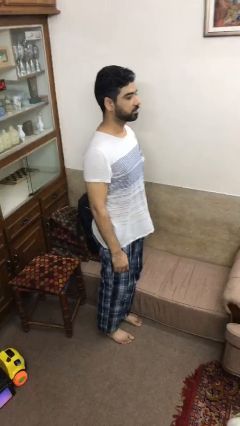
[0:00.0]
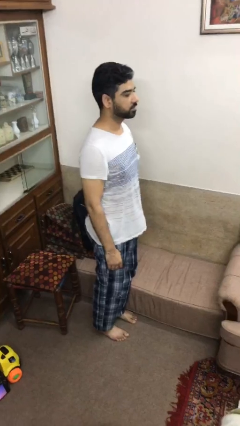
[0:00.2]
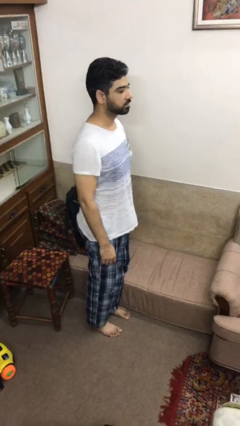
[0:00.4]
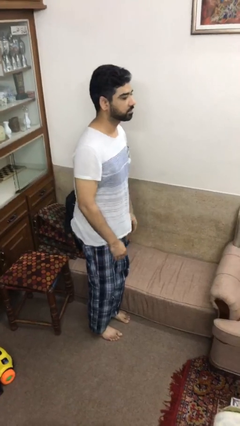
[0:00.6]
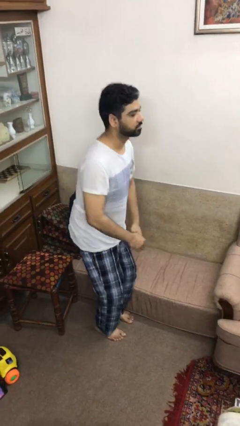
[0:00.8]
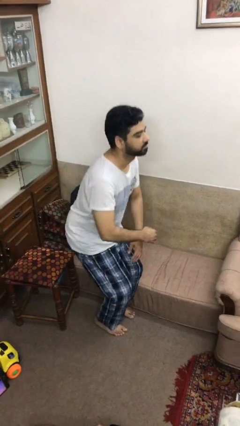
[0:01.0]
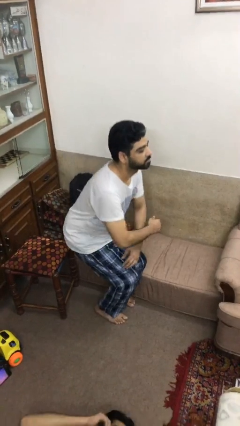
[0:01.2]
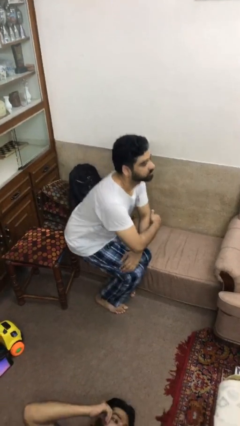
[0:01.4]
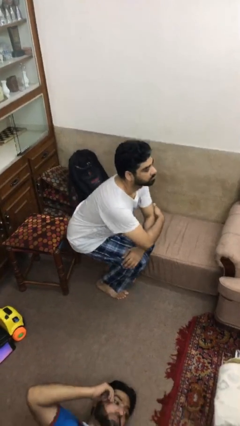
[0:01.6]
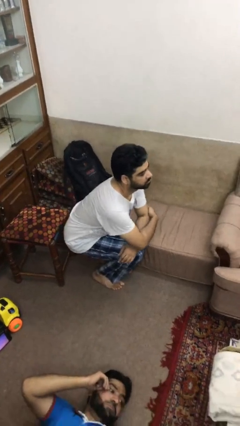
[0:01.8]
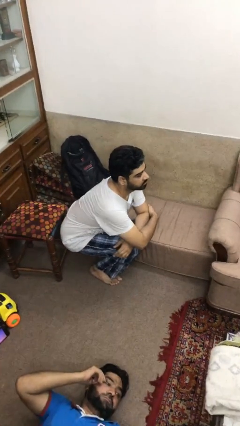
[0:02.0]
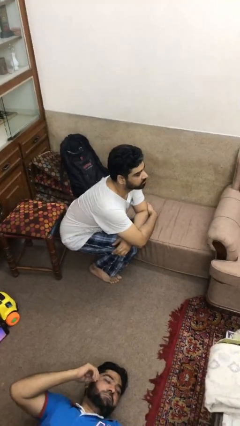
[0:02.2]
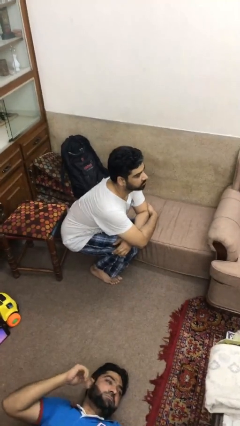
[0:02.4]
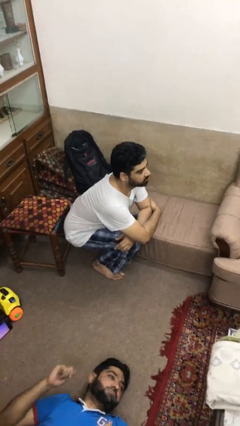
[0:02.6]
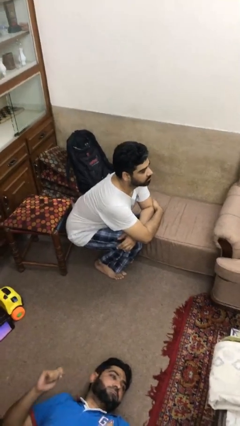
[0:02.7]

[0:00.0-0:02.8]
person squats

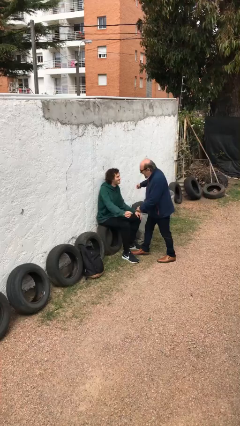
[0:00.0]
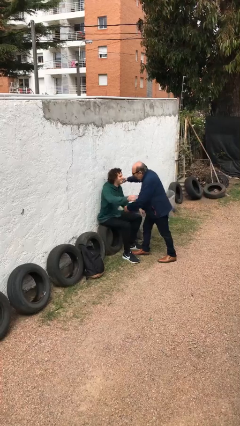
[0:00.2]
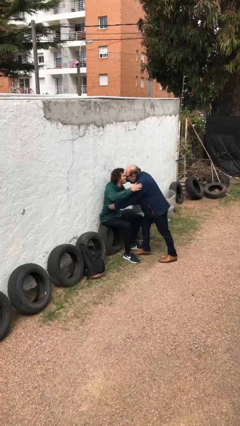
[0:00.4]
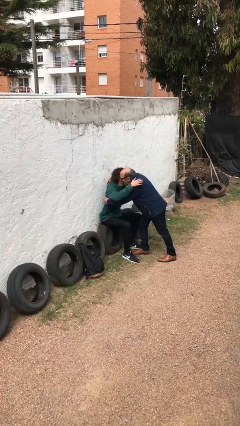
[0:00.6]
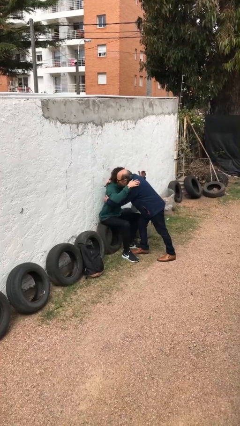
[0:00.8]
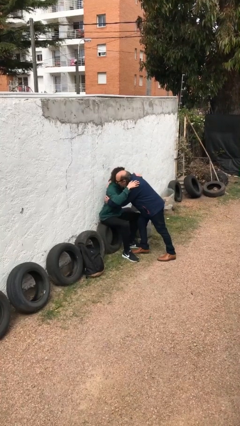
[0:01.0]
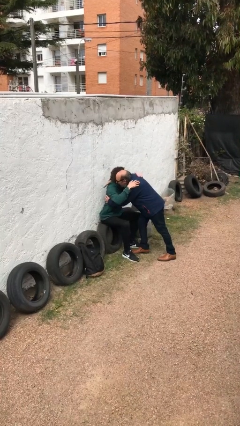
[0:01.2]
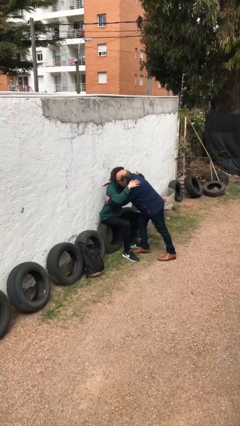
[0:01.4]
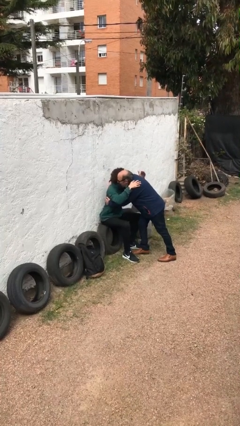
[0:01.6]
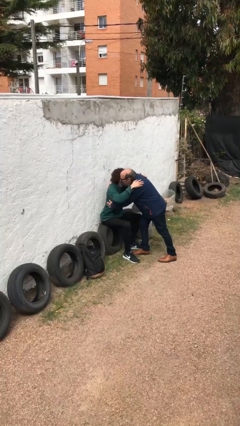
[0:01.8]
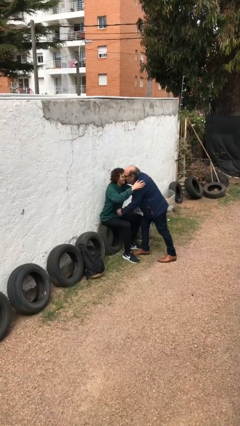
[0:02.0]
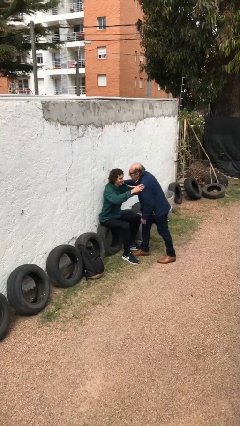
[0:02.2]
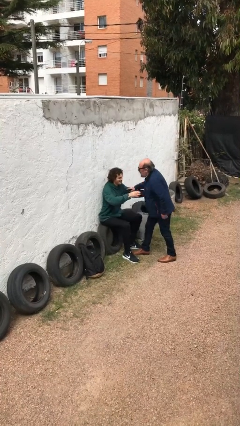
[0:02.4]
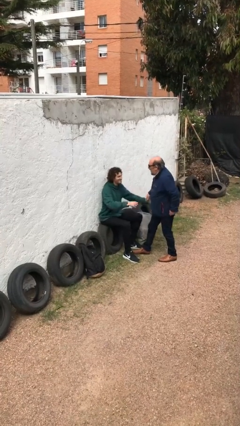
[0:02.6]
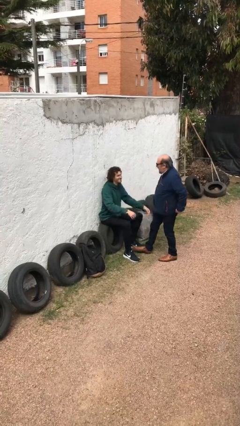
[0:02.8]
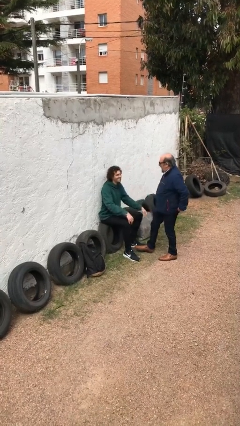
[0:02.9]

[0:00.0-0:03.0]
person embraces person

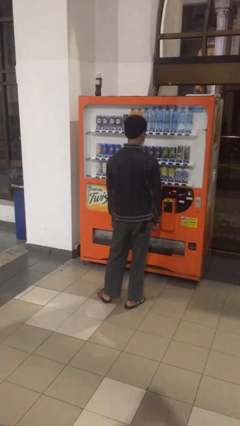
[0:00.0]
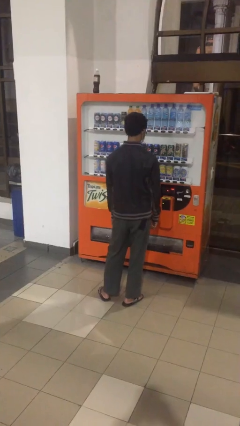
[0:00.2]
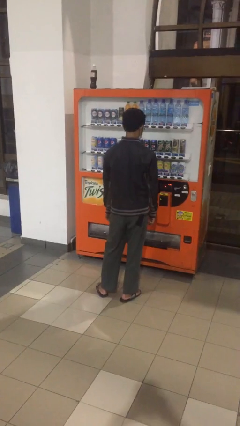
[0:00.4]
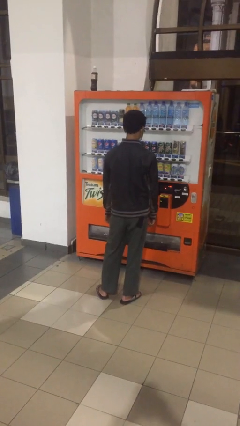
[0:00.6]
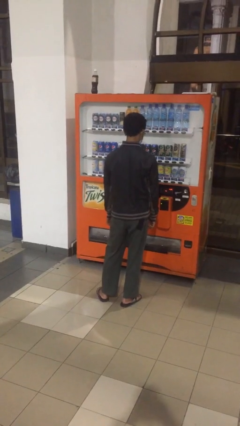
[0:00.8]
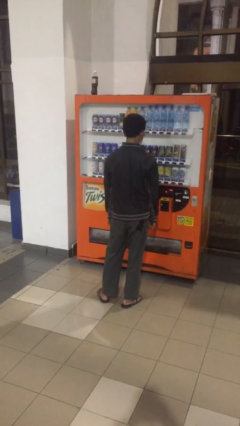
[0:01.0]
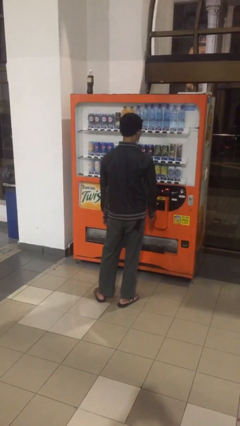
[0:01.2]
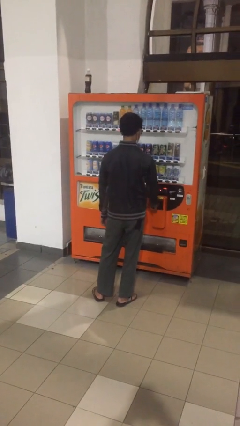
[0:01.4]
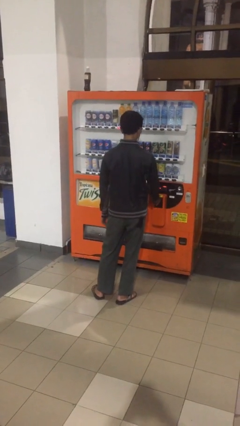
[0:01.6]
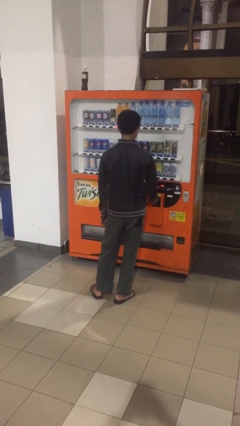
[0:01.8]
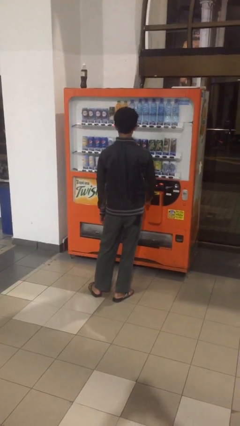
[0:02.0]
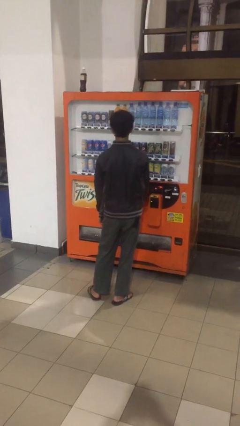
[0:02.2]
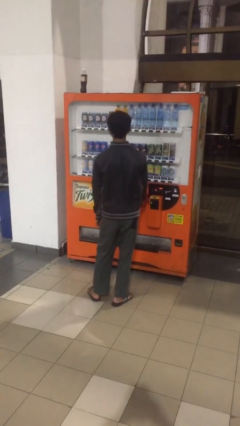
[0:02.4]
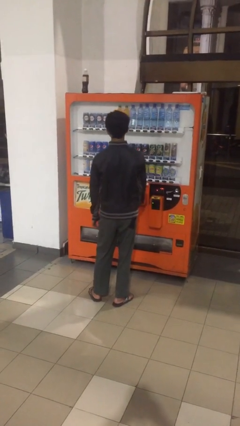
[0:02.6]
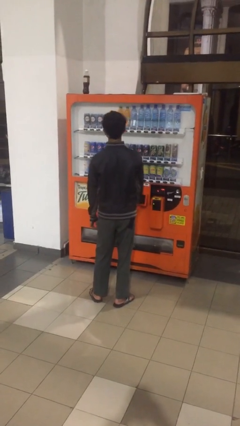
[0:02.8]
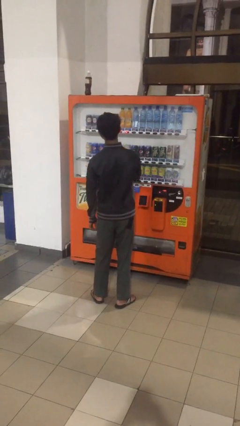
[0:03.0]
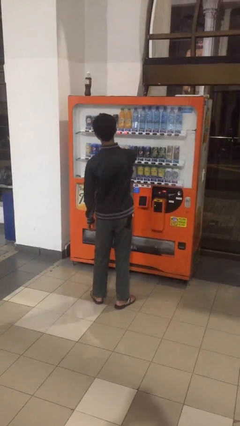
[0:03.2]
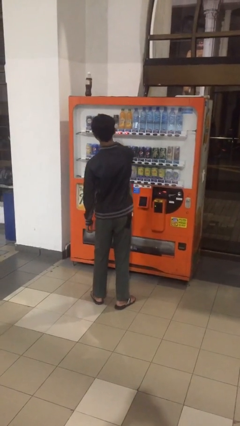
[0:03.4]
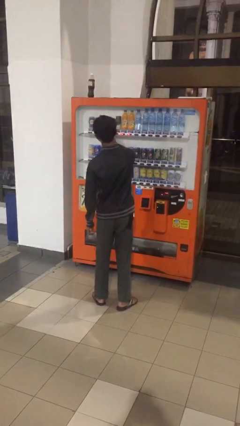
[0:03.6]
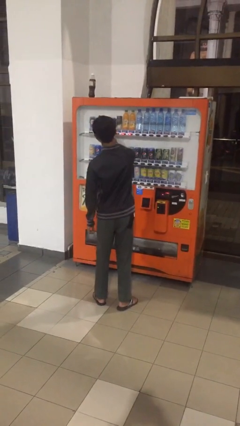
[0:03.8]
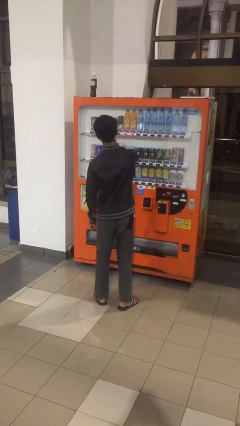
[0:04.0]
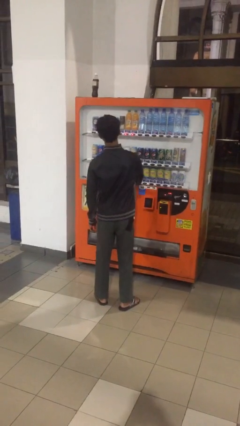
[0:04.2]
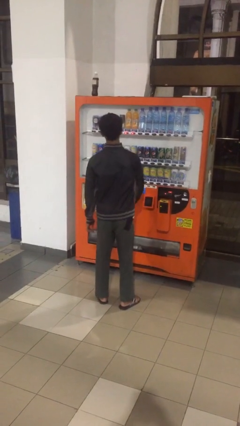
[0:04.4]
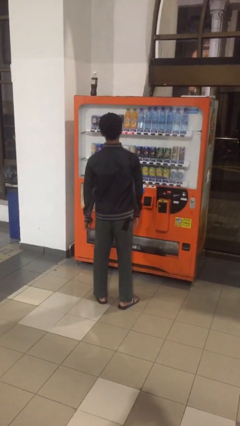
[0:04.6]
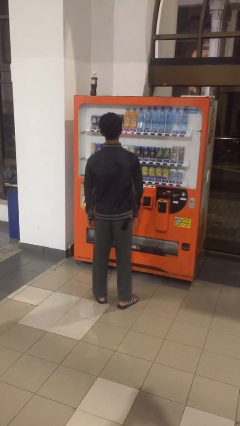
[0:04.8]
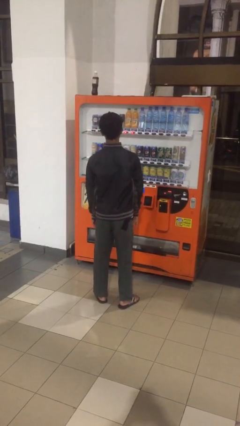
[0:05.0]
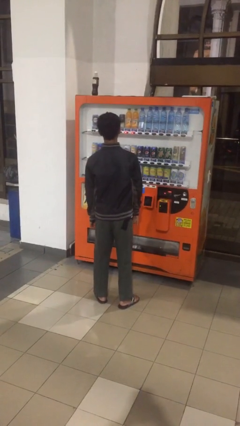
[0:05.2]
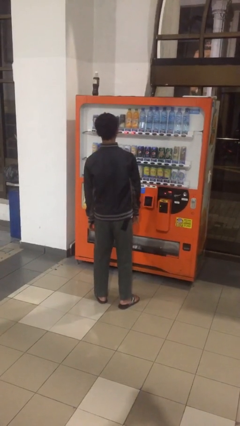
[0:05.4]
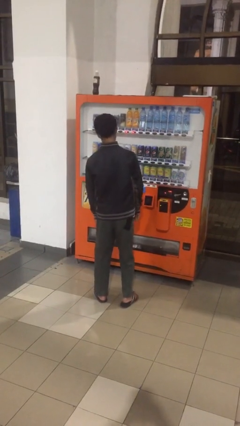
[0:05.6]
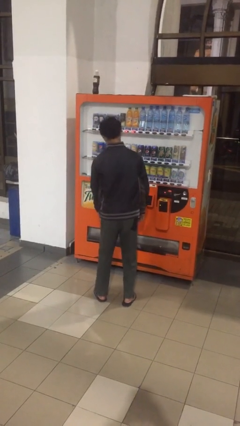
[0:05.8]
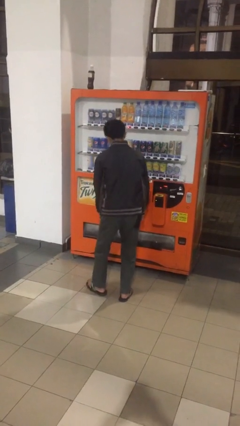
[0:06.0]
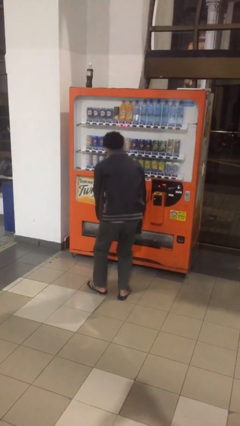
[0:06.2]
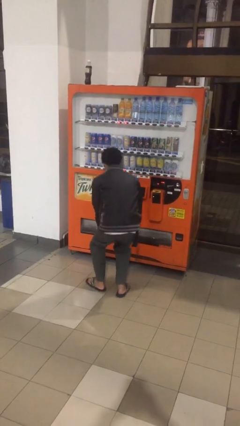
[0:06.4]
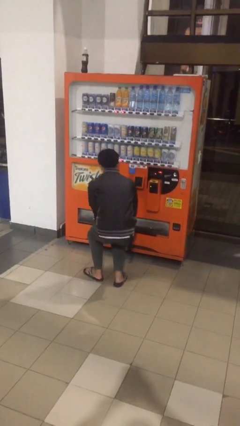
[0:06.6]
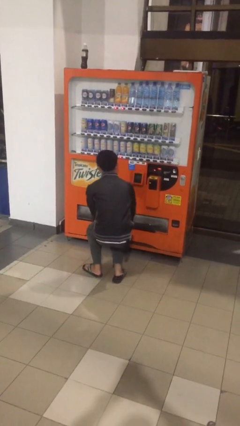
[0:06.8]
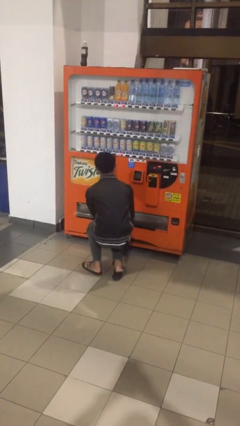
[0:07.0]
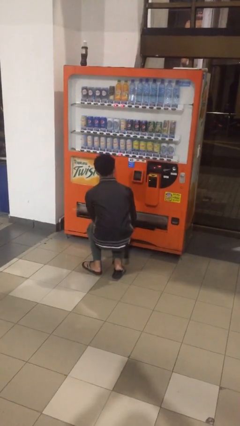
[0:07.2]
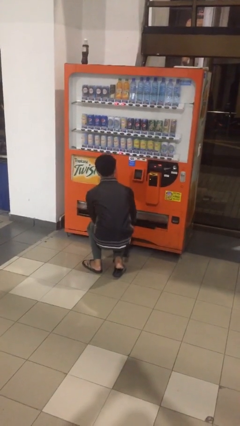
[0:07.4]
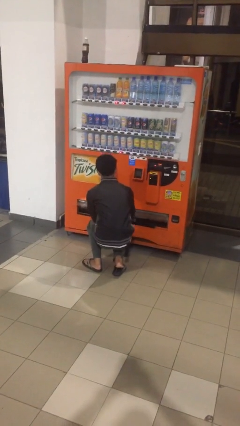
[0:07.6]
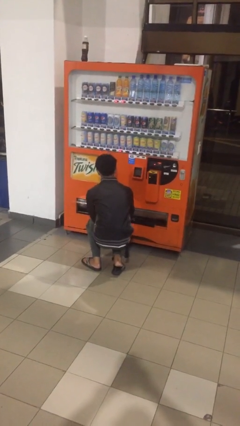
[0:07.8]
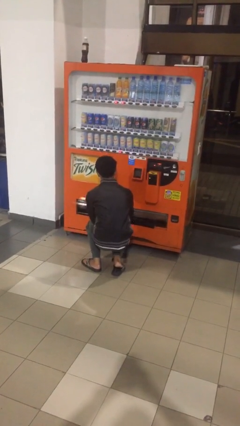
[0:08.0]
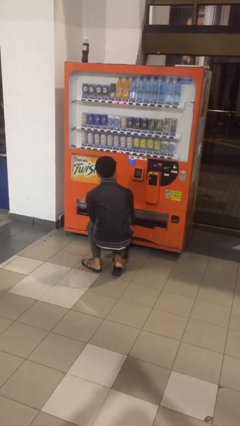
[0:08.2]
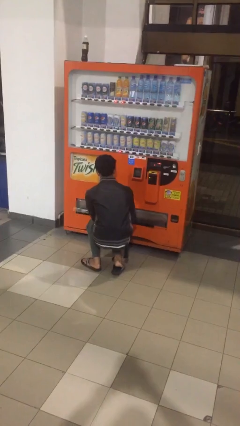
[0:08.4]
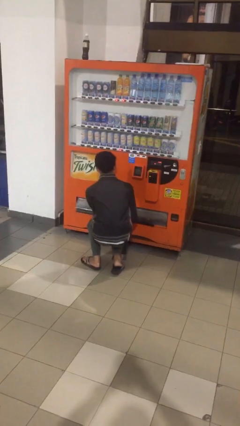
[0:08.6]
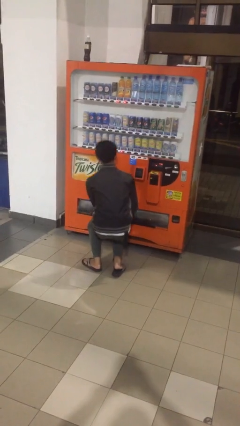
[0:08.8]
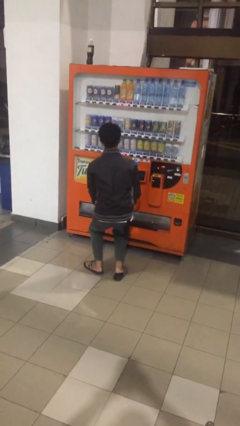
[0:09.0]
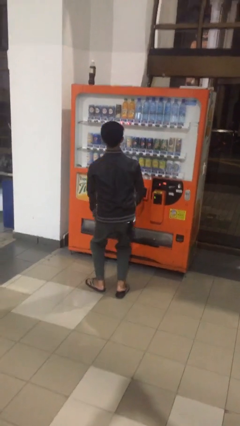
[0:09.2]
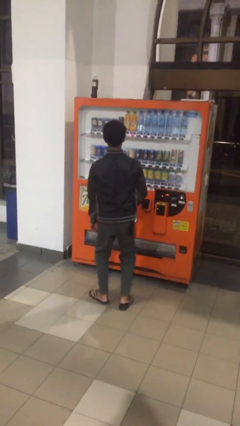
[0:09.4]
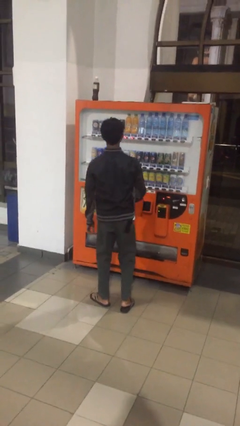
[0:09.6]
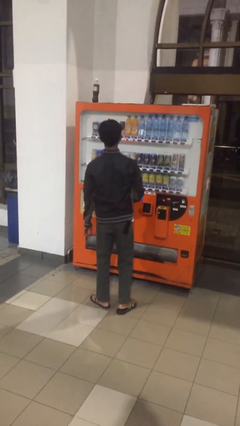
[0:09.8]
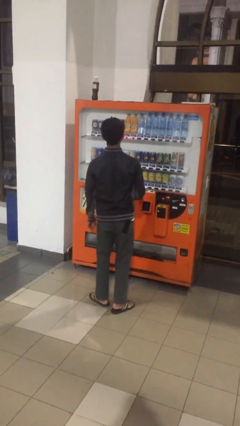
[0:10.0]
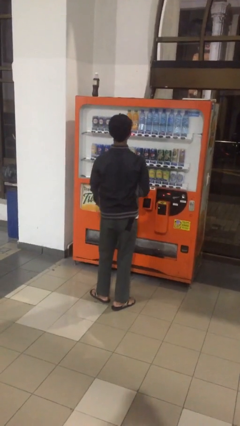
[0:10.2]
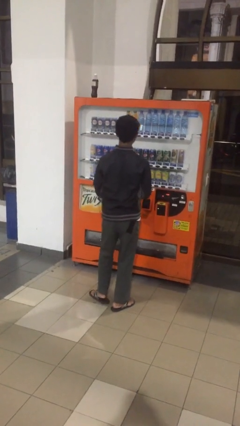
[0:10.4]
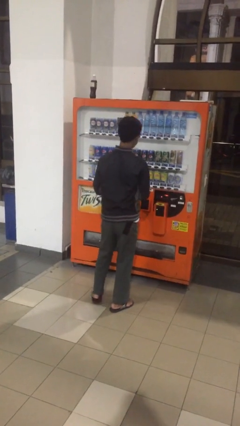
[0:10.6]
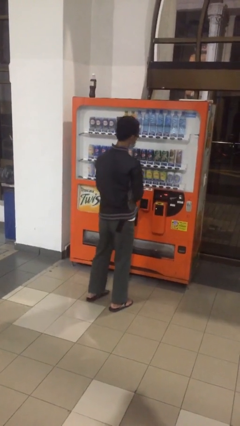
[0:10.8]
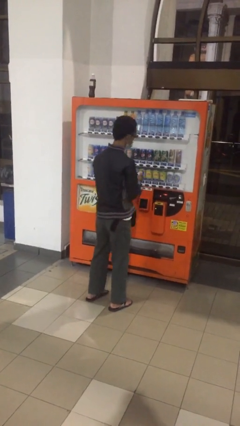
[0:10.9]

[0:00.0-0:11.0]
person purchases from machine

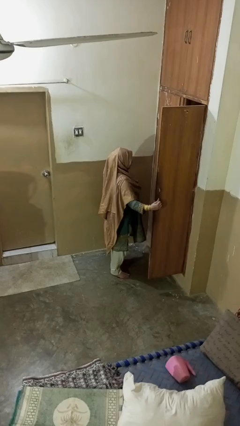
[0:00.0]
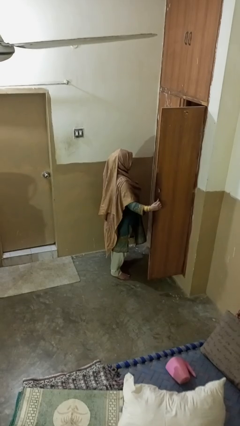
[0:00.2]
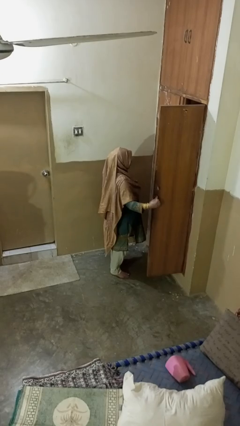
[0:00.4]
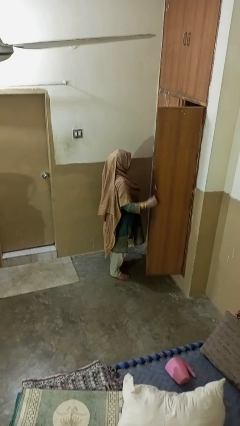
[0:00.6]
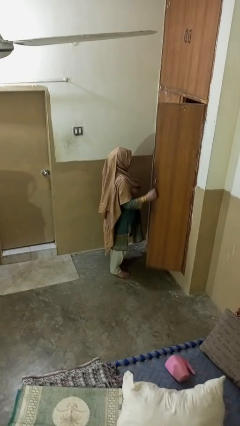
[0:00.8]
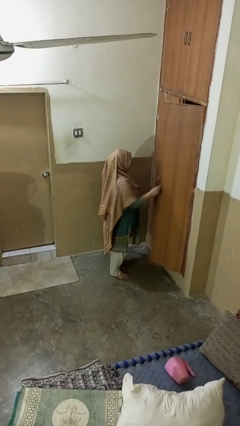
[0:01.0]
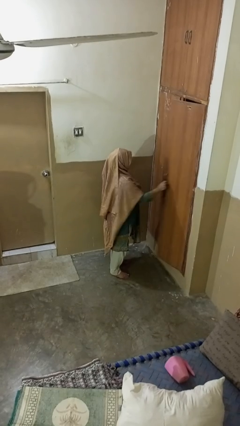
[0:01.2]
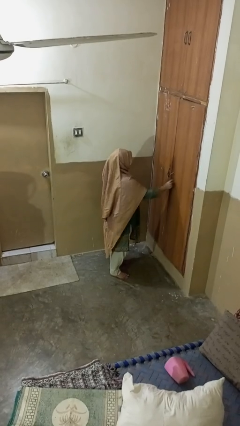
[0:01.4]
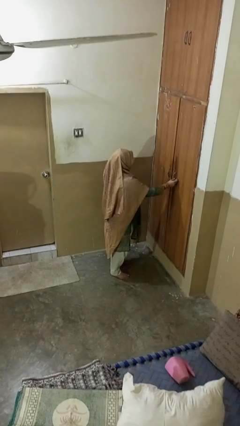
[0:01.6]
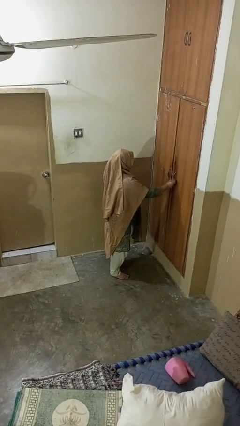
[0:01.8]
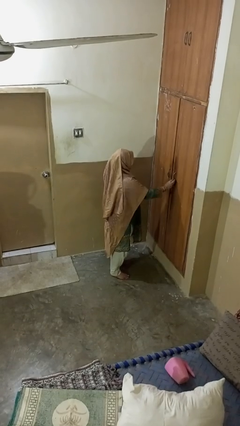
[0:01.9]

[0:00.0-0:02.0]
person closes closet door
